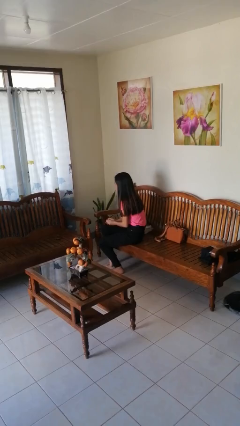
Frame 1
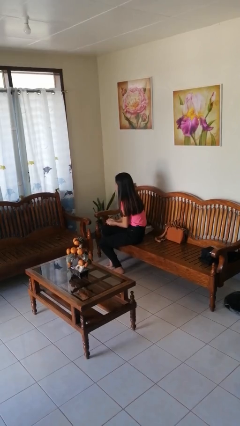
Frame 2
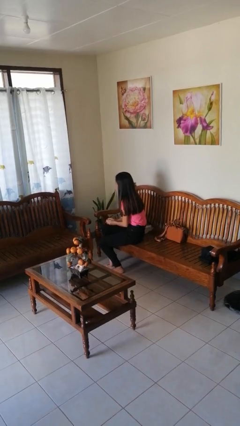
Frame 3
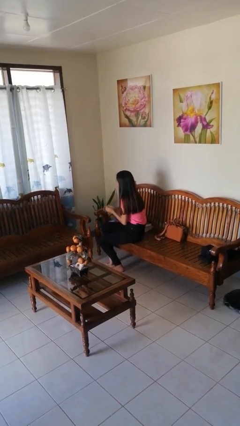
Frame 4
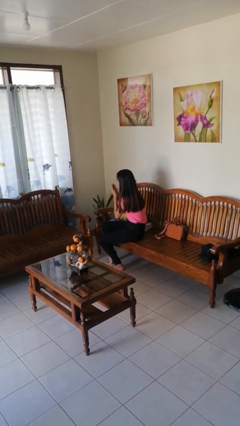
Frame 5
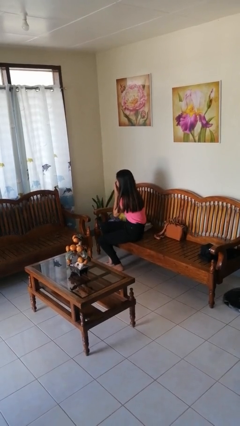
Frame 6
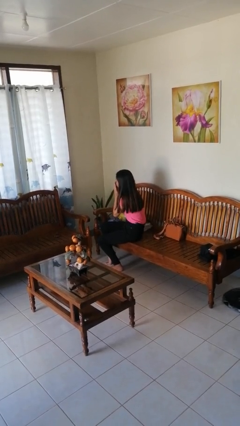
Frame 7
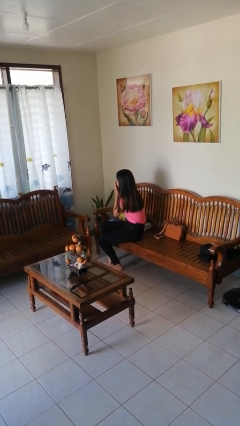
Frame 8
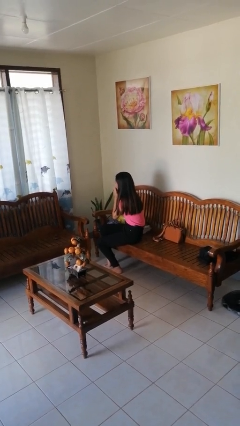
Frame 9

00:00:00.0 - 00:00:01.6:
person blows into hands

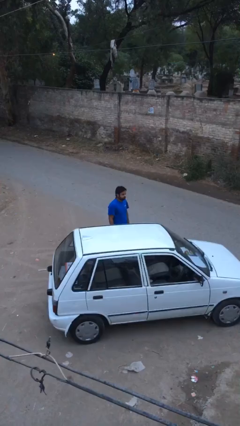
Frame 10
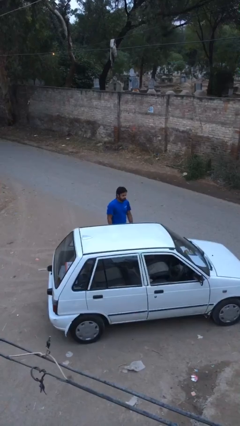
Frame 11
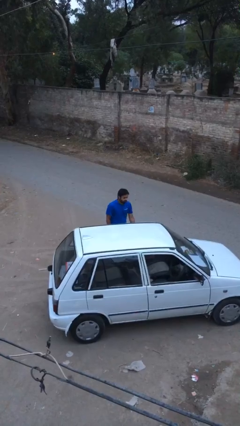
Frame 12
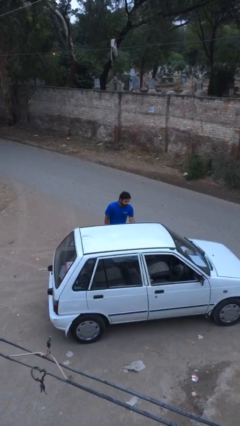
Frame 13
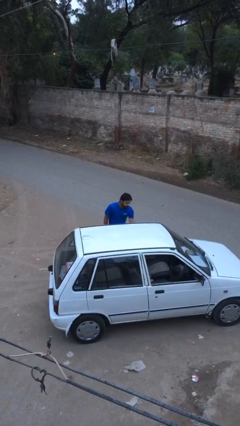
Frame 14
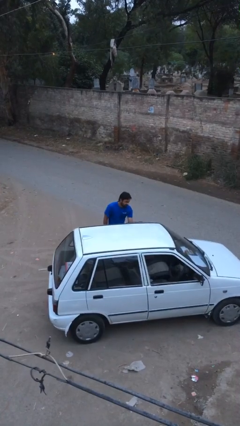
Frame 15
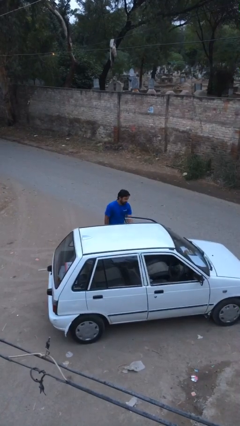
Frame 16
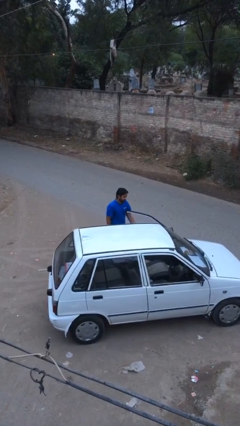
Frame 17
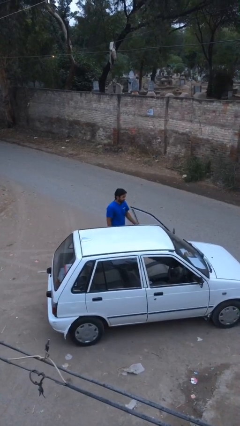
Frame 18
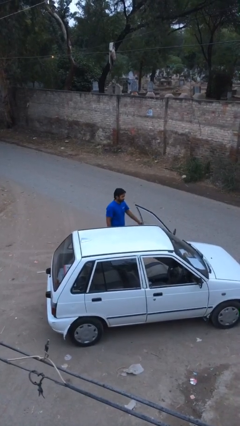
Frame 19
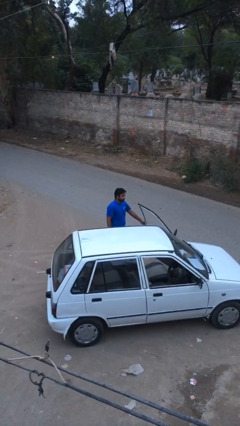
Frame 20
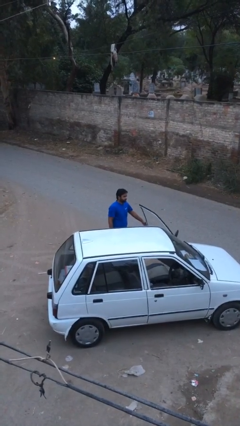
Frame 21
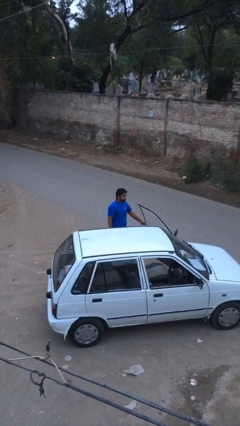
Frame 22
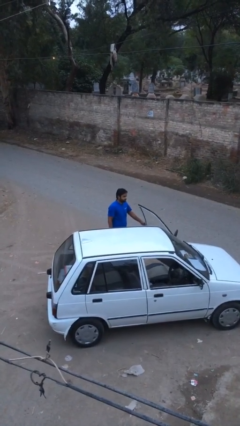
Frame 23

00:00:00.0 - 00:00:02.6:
person opens car door

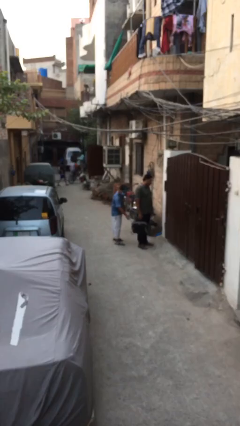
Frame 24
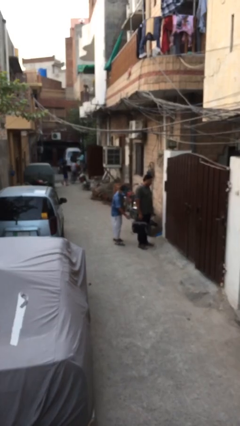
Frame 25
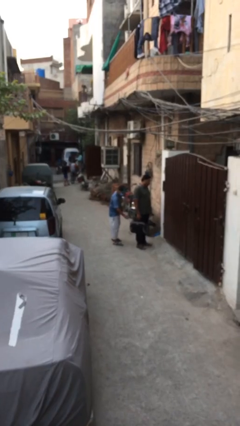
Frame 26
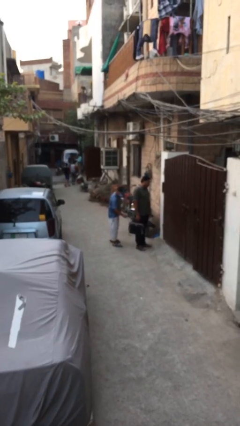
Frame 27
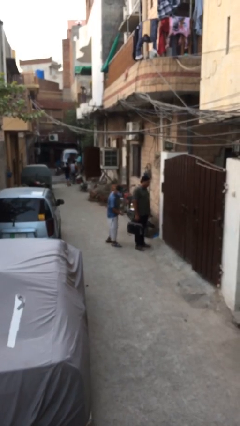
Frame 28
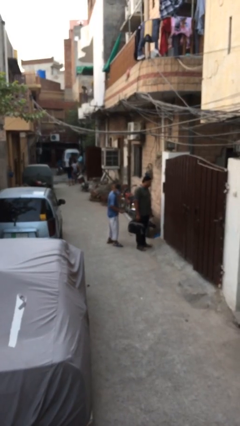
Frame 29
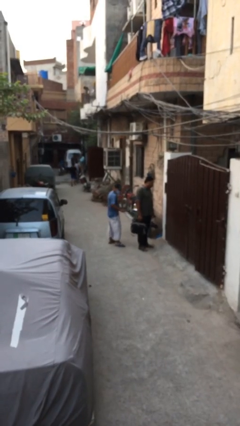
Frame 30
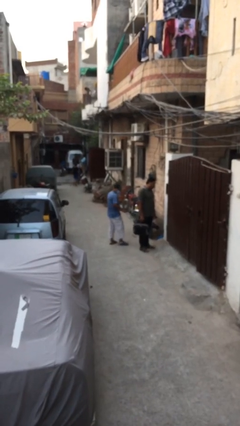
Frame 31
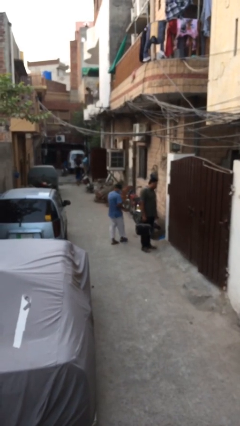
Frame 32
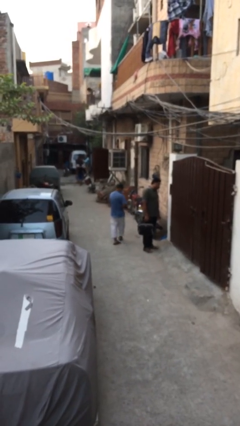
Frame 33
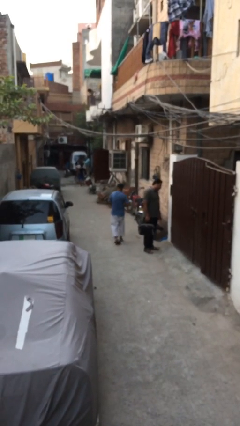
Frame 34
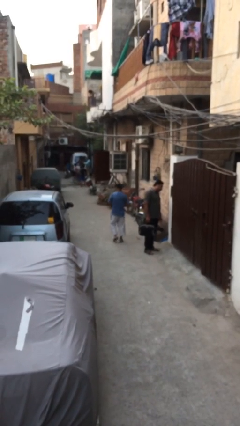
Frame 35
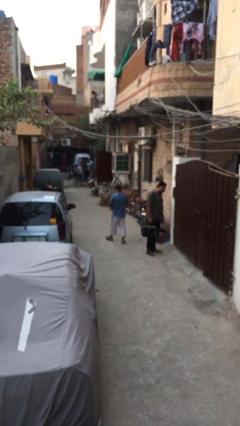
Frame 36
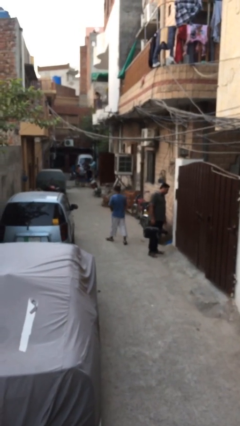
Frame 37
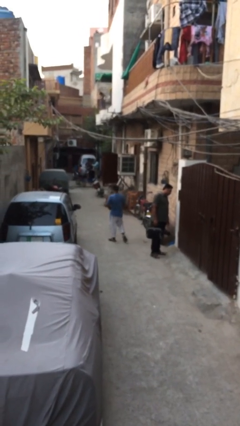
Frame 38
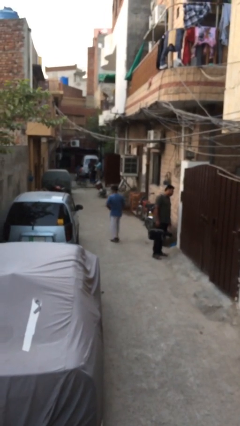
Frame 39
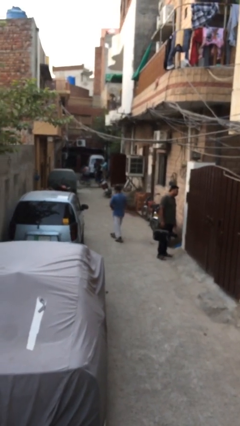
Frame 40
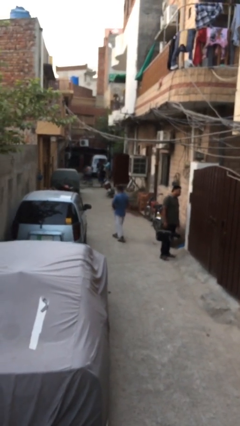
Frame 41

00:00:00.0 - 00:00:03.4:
person steals object from person

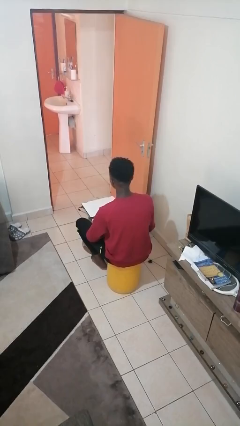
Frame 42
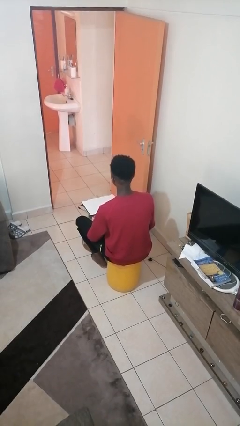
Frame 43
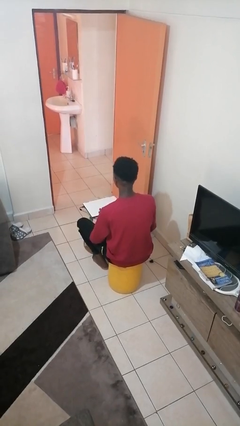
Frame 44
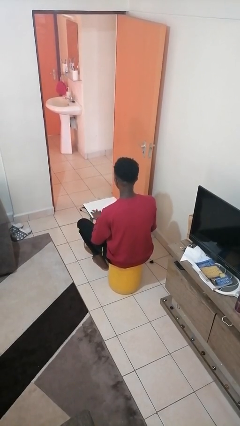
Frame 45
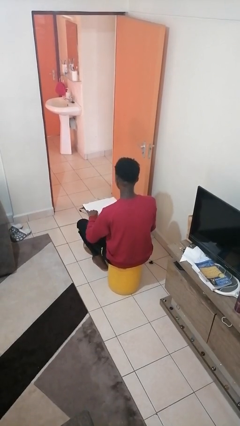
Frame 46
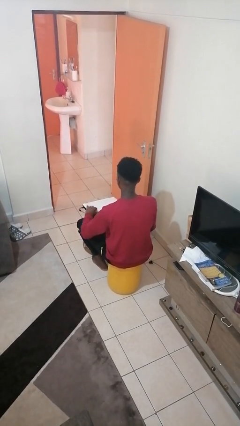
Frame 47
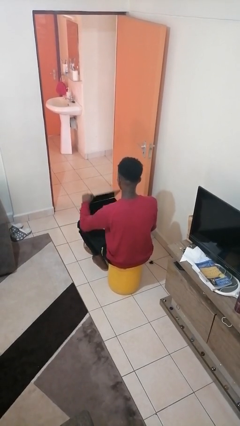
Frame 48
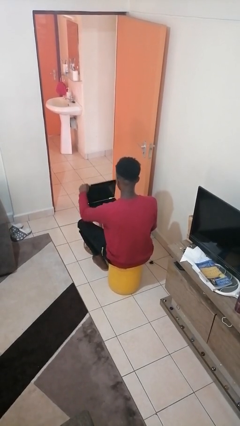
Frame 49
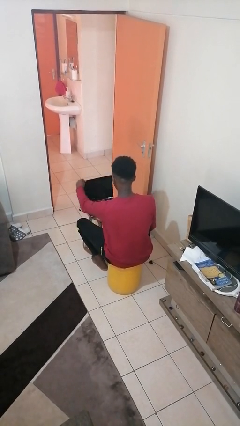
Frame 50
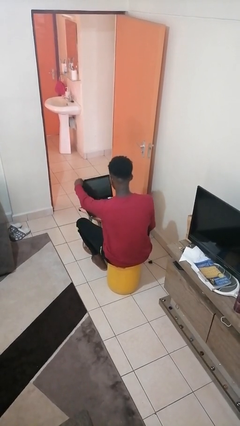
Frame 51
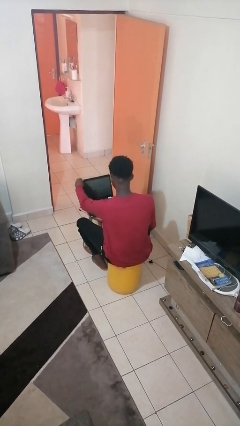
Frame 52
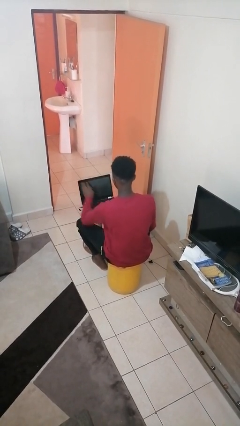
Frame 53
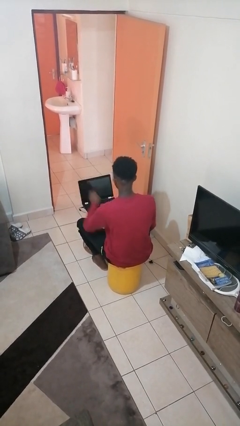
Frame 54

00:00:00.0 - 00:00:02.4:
person opens laptop

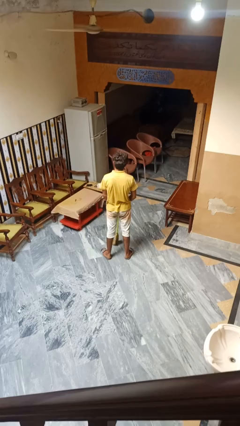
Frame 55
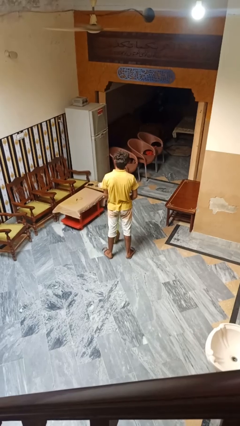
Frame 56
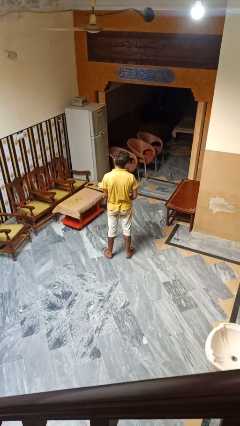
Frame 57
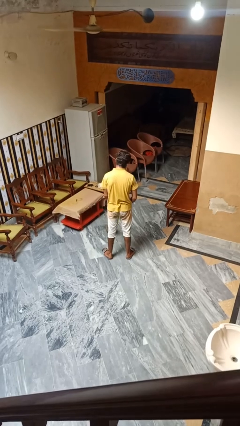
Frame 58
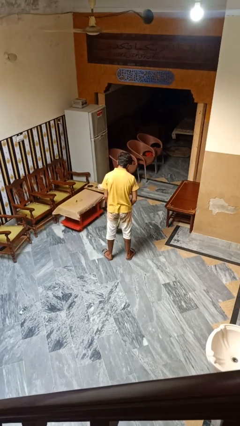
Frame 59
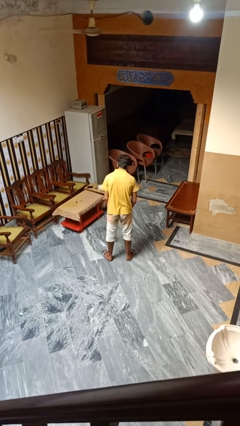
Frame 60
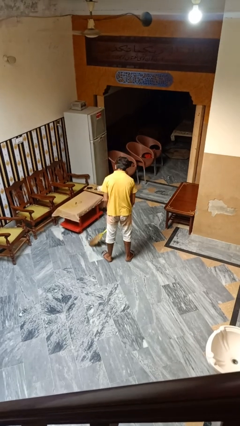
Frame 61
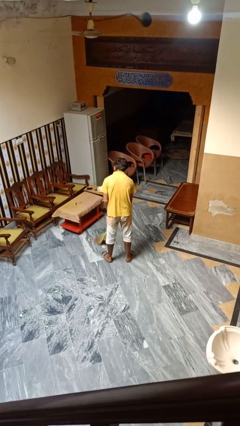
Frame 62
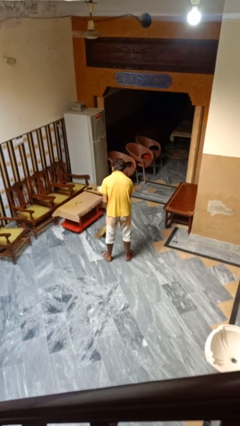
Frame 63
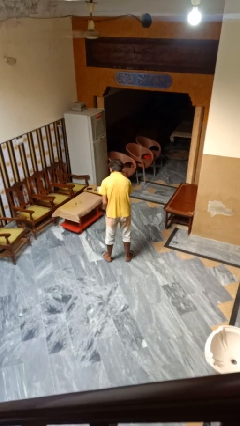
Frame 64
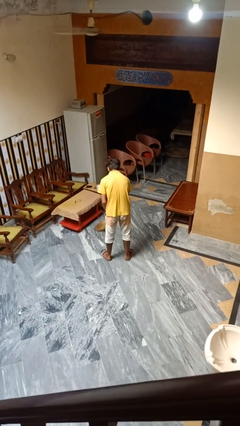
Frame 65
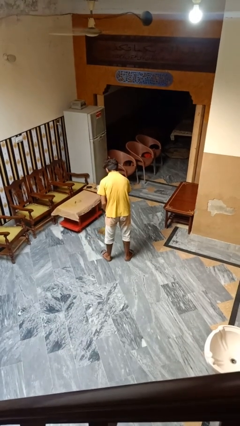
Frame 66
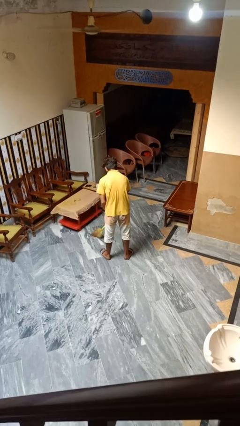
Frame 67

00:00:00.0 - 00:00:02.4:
person mops

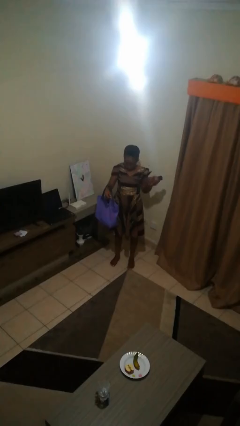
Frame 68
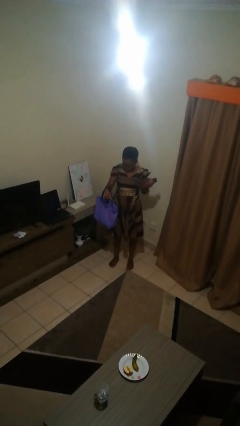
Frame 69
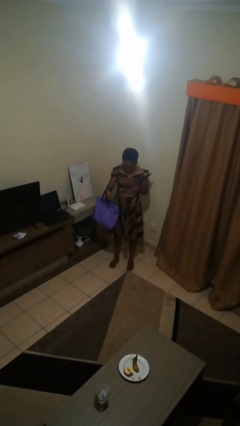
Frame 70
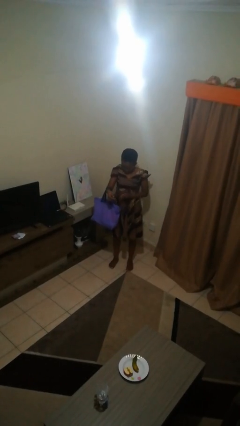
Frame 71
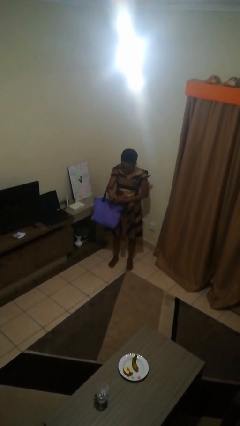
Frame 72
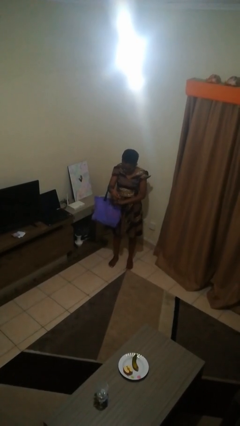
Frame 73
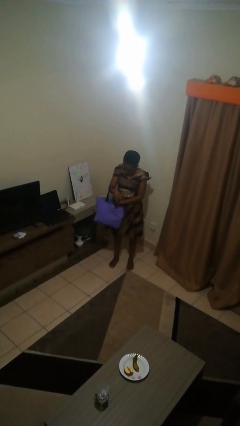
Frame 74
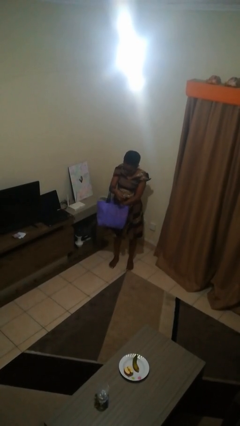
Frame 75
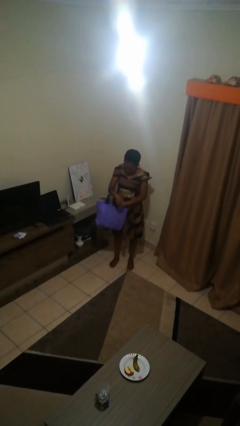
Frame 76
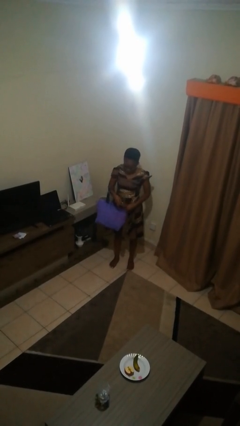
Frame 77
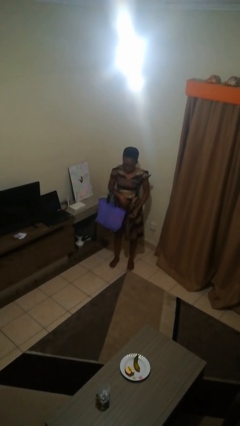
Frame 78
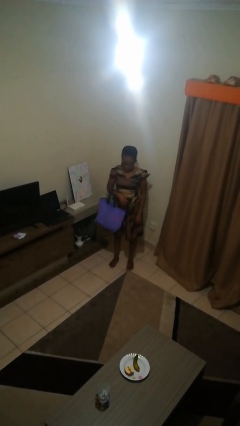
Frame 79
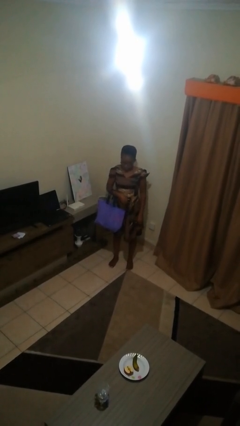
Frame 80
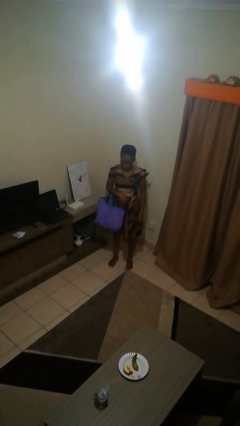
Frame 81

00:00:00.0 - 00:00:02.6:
person puts object into bag

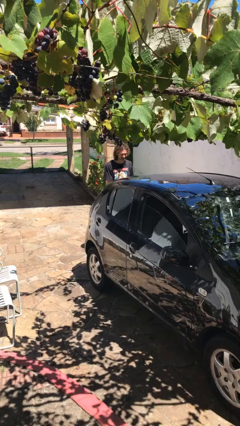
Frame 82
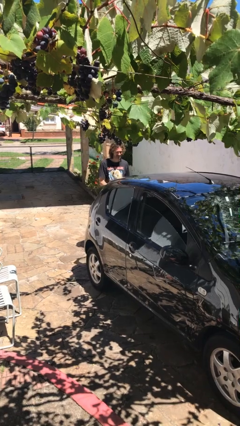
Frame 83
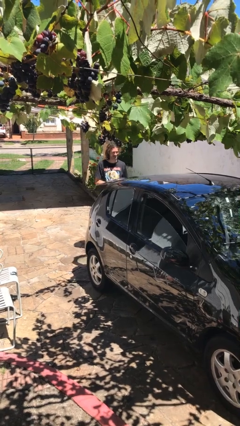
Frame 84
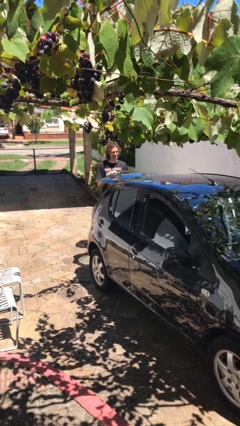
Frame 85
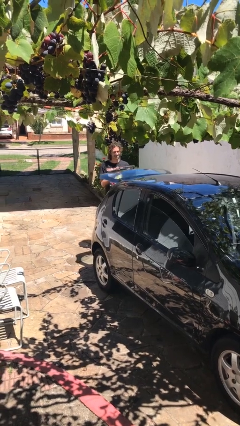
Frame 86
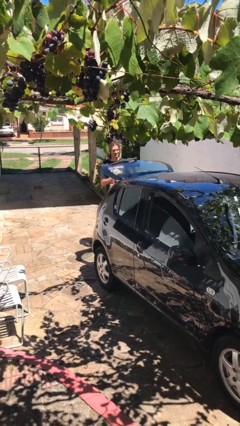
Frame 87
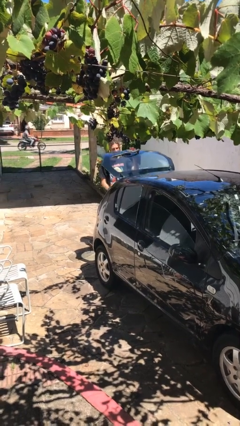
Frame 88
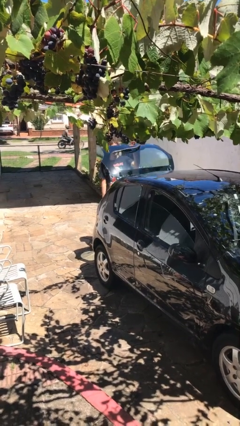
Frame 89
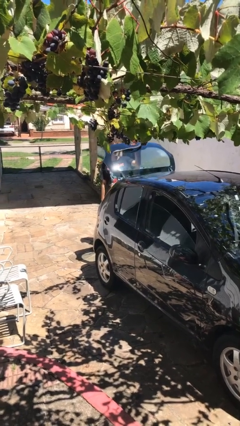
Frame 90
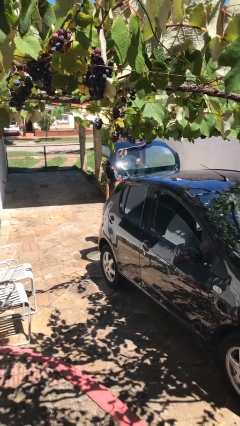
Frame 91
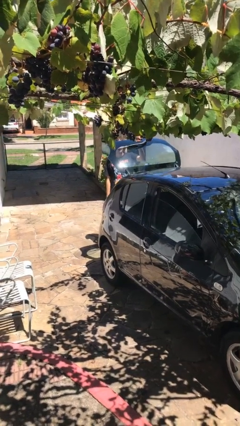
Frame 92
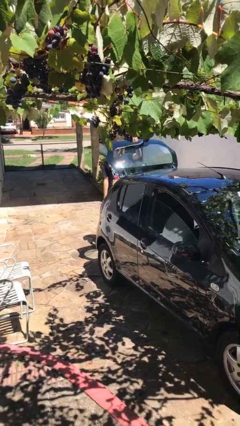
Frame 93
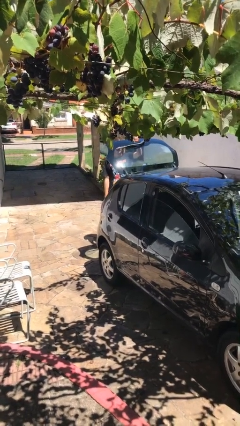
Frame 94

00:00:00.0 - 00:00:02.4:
person opens car trunk
